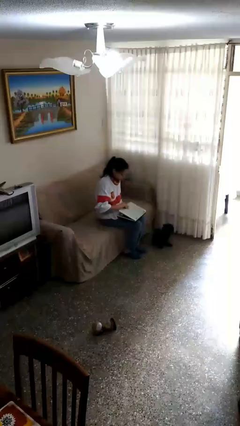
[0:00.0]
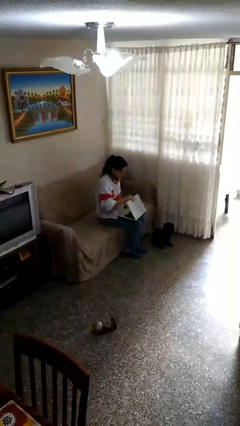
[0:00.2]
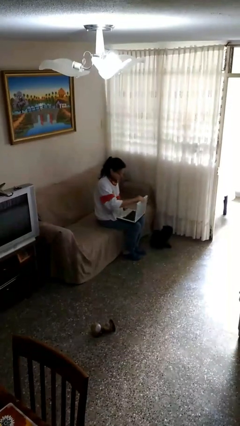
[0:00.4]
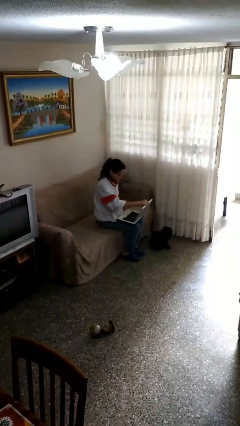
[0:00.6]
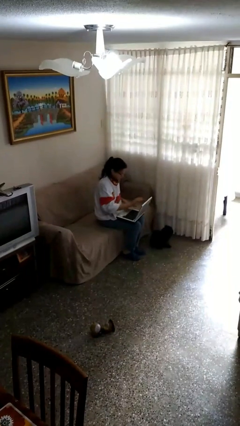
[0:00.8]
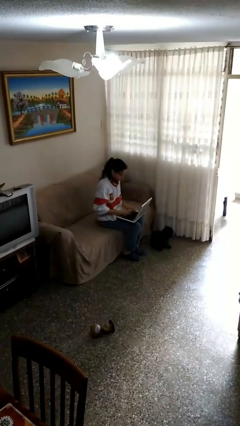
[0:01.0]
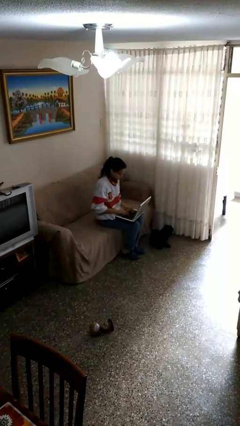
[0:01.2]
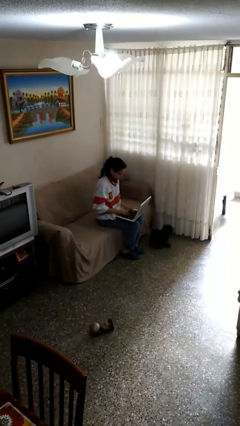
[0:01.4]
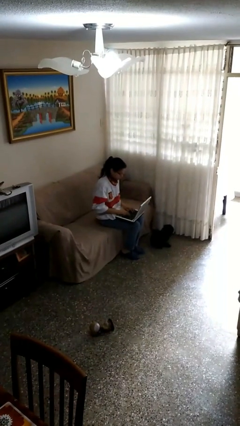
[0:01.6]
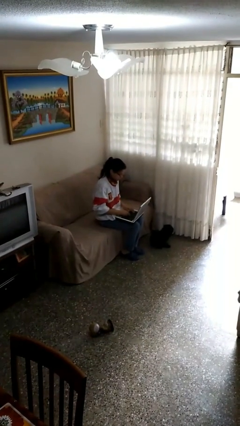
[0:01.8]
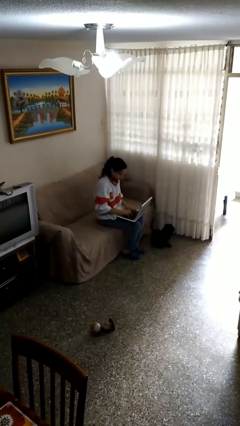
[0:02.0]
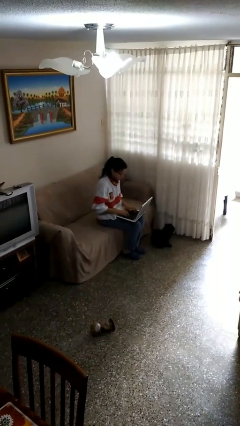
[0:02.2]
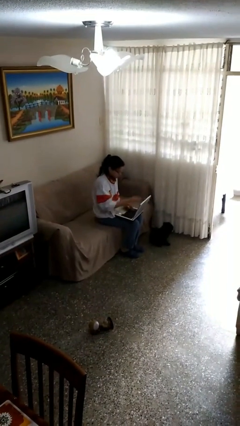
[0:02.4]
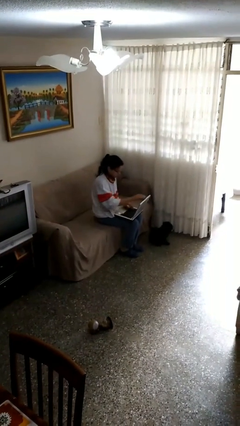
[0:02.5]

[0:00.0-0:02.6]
person interacts with laptop

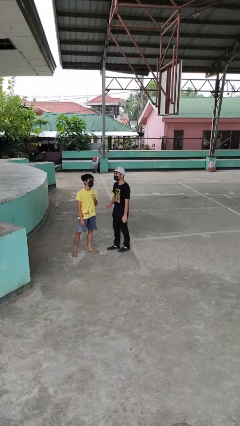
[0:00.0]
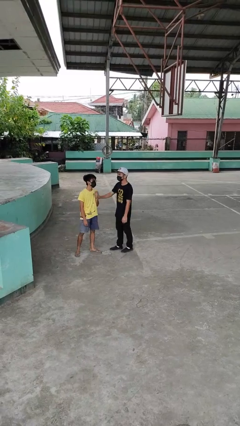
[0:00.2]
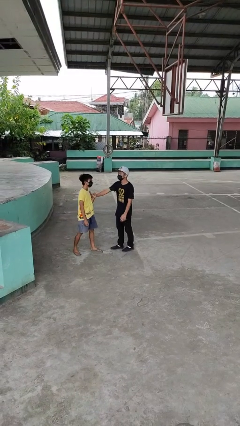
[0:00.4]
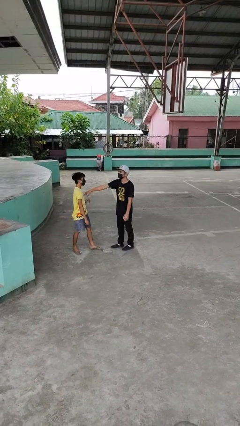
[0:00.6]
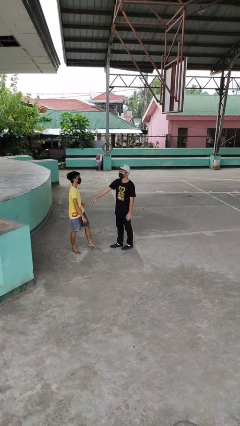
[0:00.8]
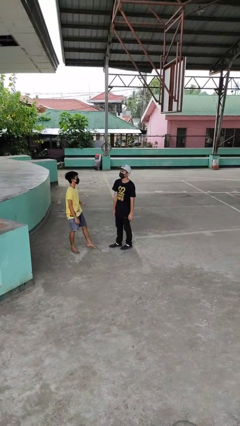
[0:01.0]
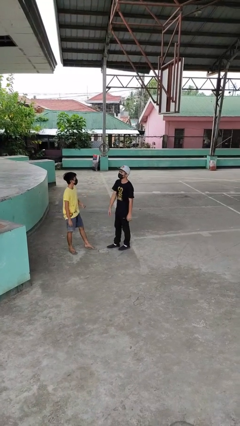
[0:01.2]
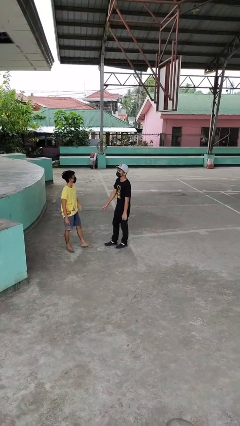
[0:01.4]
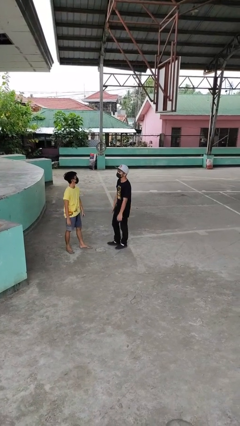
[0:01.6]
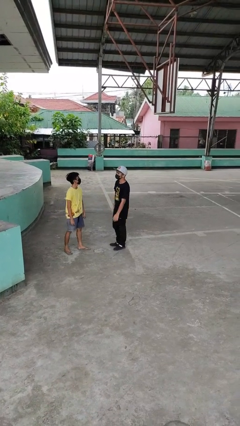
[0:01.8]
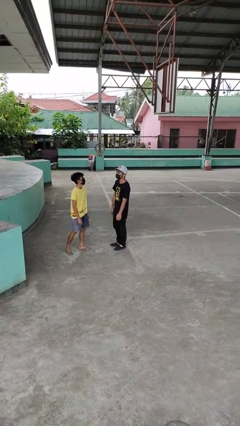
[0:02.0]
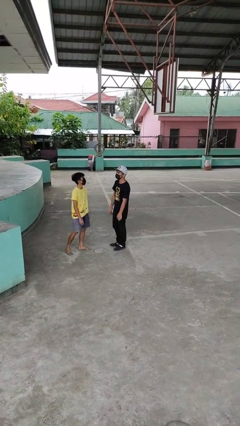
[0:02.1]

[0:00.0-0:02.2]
person shoves person

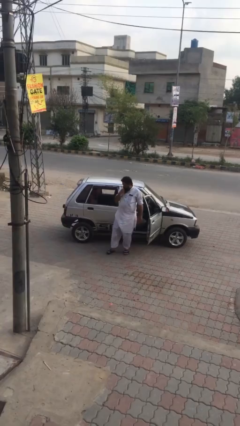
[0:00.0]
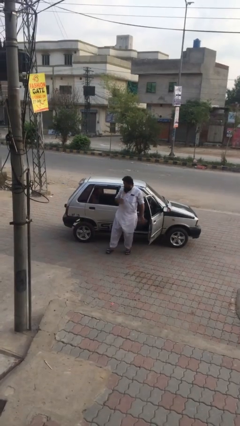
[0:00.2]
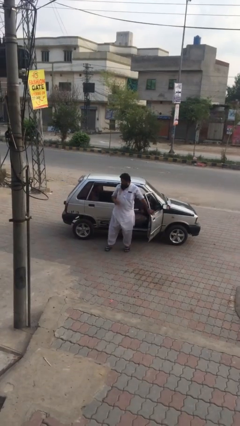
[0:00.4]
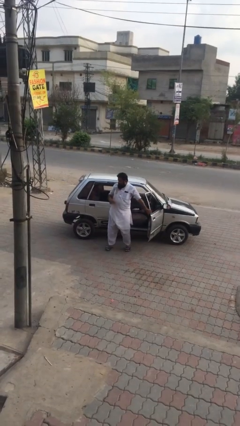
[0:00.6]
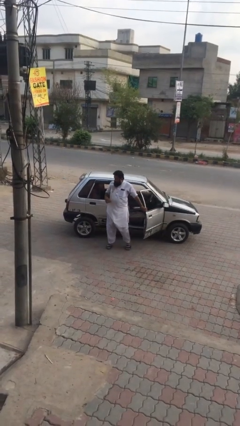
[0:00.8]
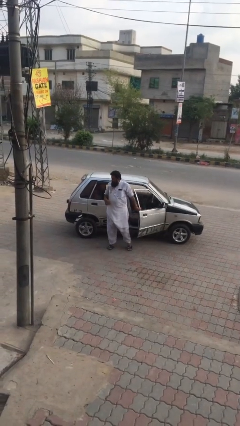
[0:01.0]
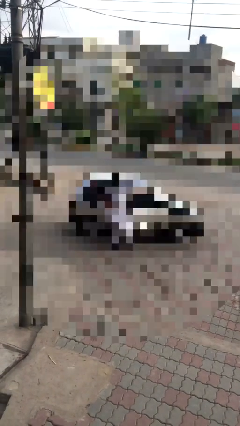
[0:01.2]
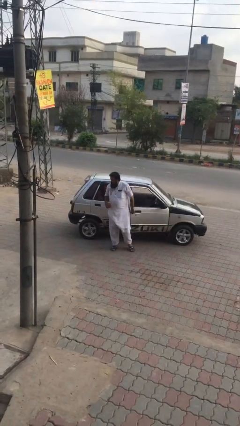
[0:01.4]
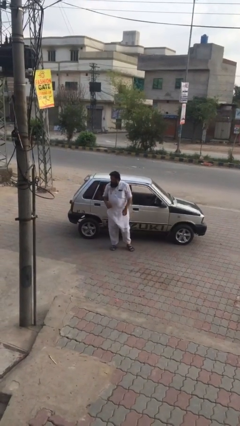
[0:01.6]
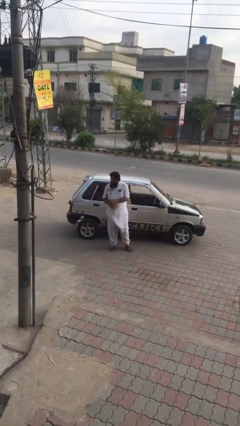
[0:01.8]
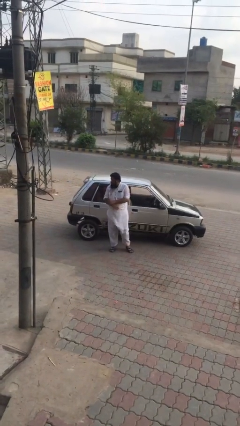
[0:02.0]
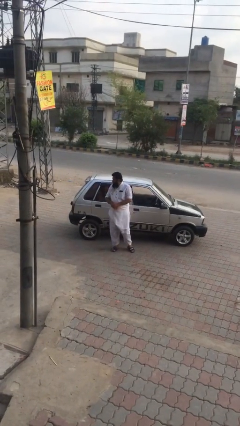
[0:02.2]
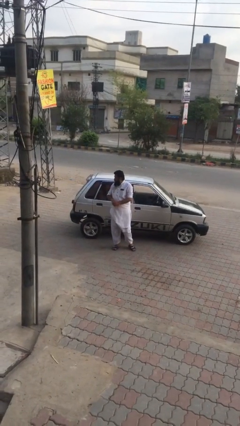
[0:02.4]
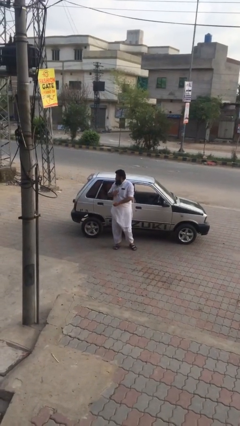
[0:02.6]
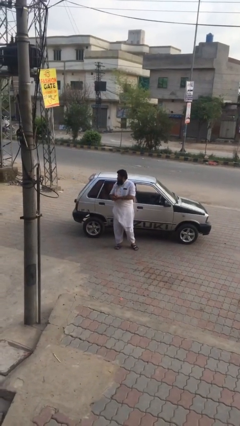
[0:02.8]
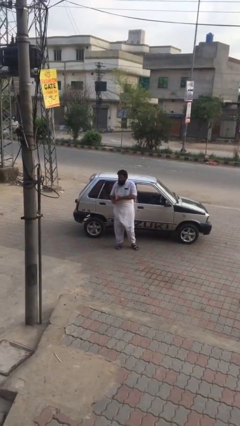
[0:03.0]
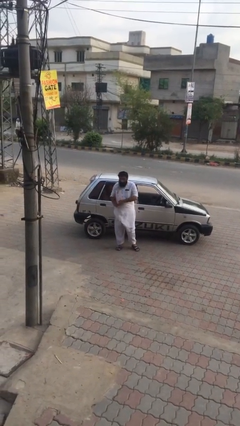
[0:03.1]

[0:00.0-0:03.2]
person closes car door

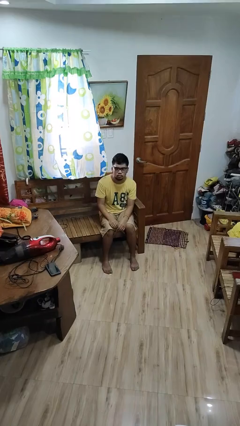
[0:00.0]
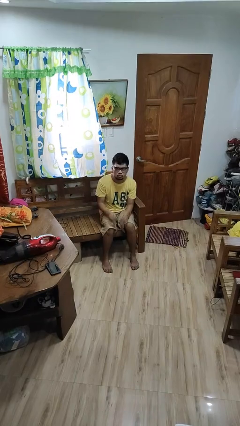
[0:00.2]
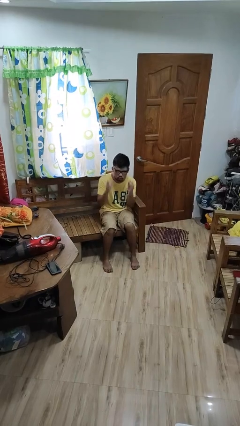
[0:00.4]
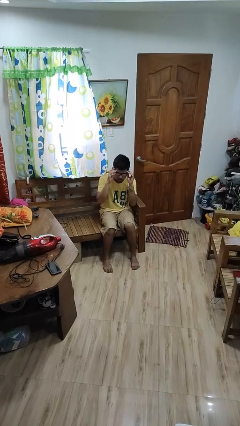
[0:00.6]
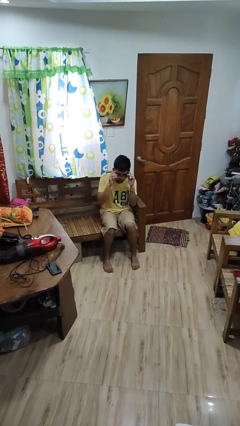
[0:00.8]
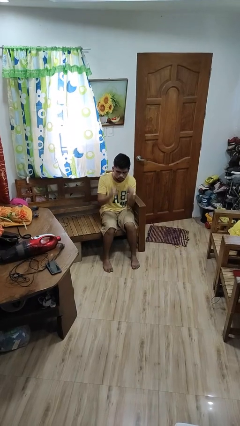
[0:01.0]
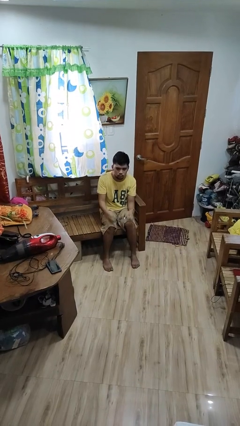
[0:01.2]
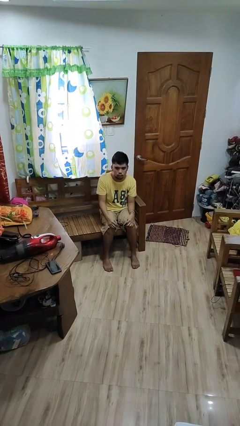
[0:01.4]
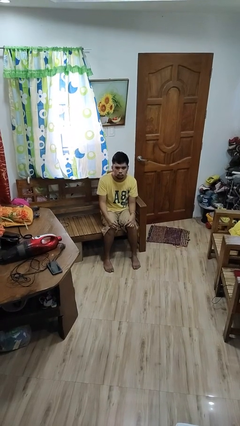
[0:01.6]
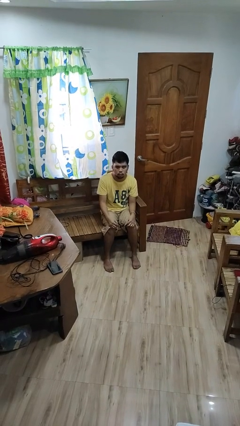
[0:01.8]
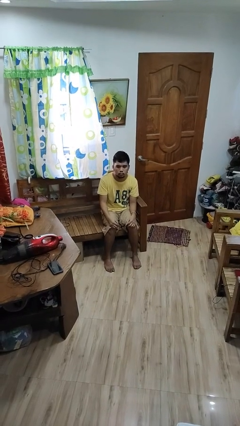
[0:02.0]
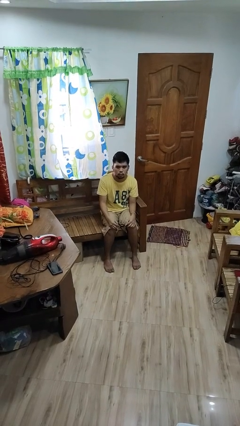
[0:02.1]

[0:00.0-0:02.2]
person takes off glasses

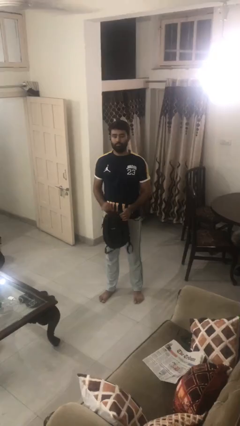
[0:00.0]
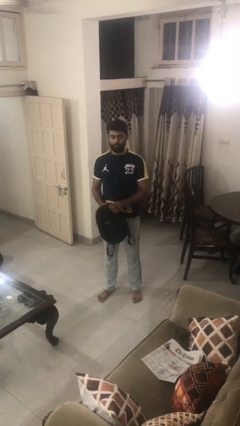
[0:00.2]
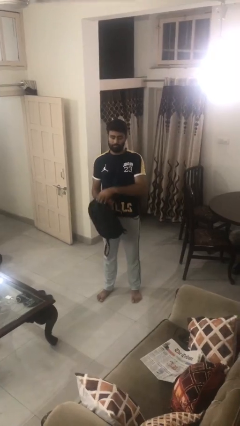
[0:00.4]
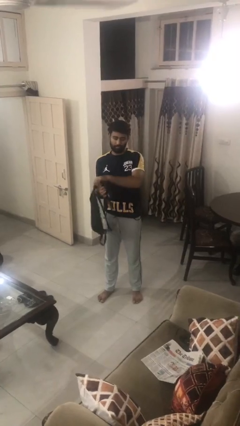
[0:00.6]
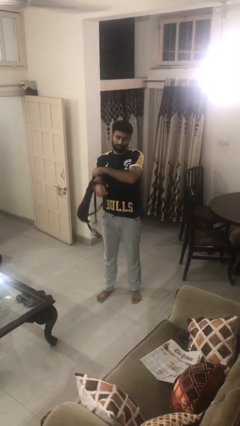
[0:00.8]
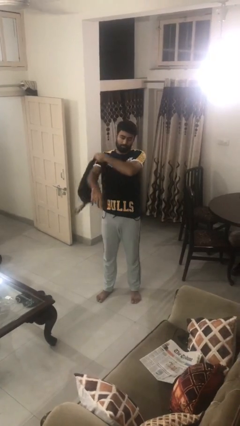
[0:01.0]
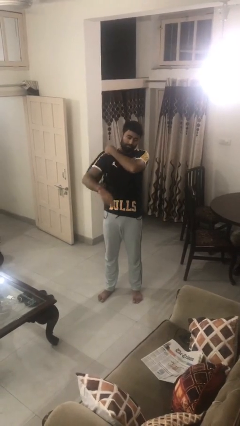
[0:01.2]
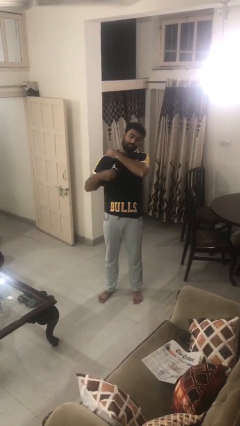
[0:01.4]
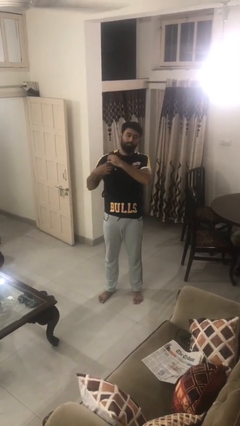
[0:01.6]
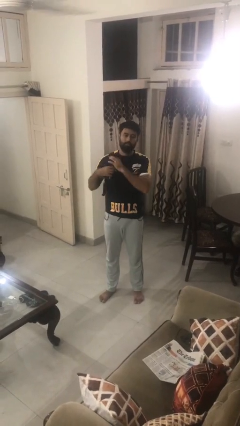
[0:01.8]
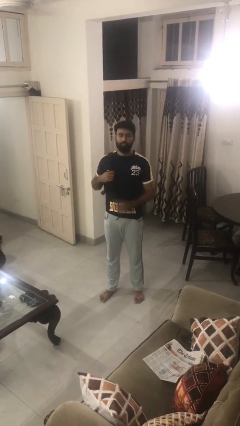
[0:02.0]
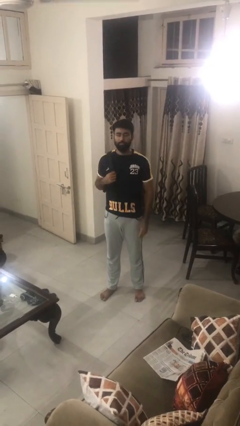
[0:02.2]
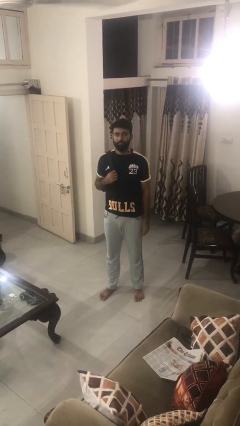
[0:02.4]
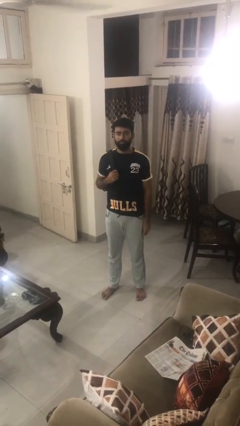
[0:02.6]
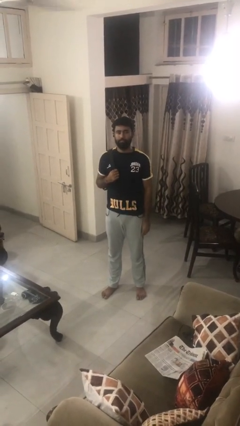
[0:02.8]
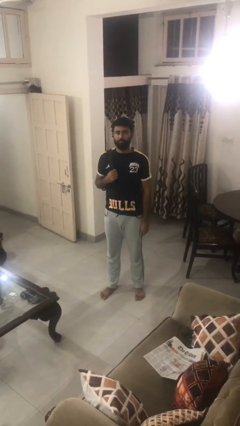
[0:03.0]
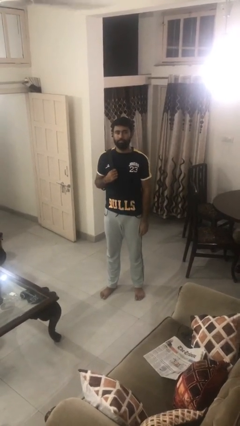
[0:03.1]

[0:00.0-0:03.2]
person puts on backpack

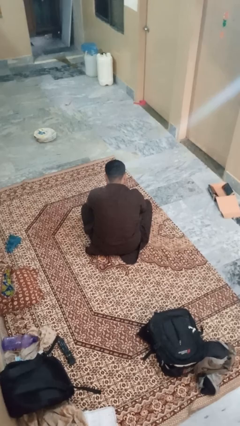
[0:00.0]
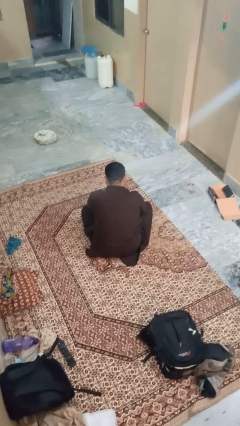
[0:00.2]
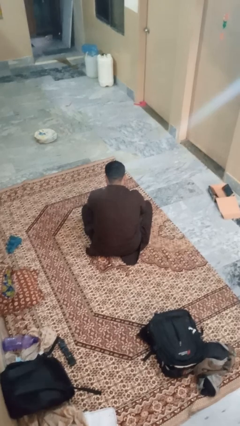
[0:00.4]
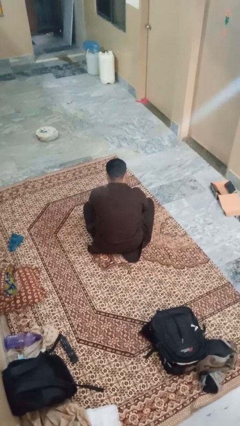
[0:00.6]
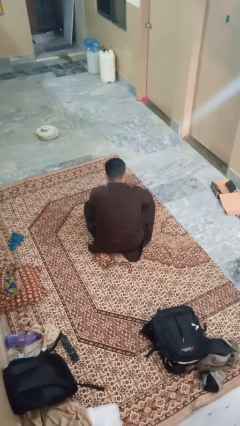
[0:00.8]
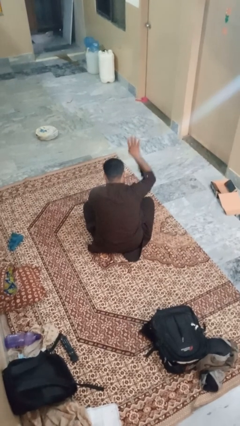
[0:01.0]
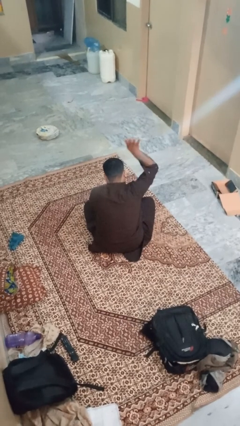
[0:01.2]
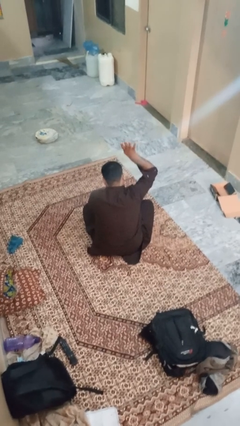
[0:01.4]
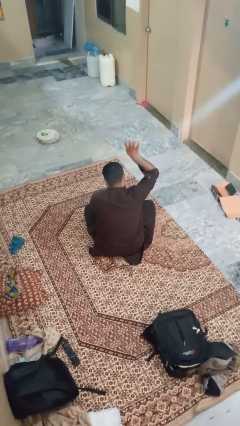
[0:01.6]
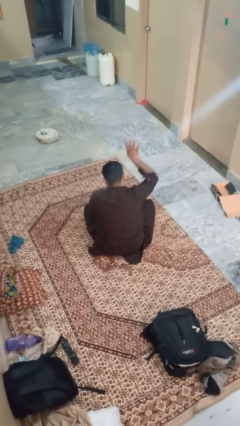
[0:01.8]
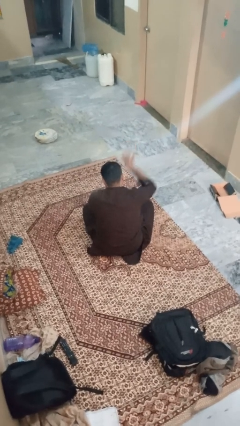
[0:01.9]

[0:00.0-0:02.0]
person gestures number four

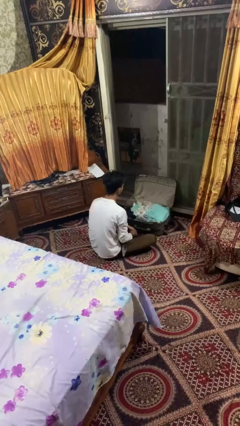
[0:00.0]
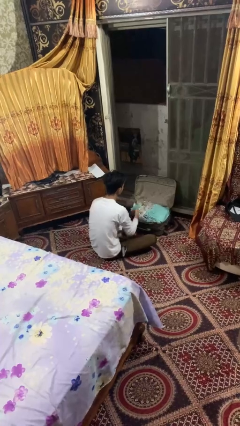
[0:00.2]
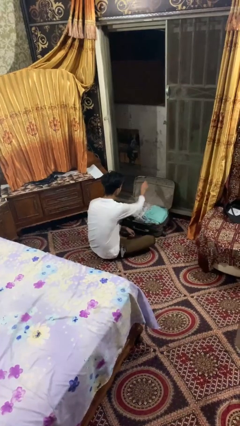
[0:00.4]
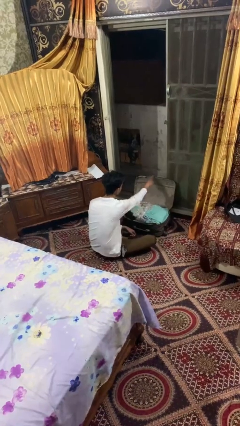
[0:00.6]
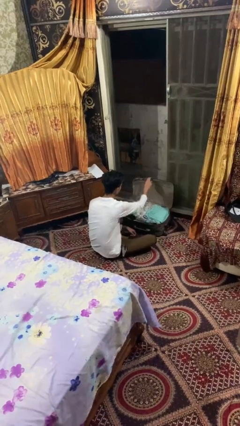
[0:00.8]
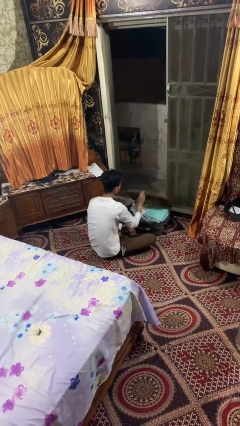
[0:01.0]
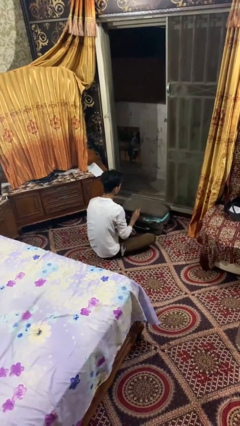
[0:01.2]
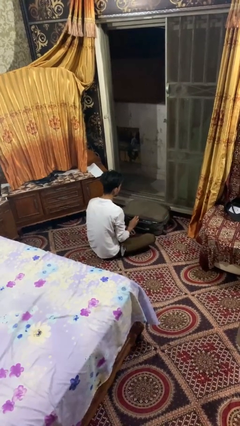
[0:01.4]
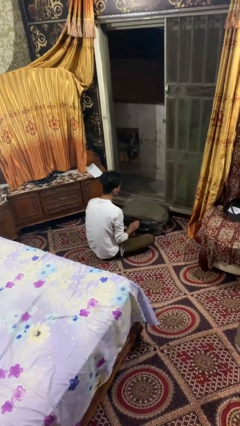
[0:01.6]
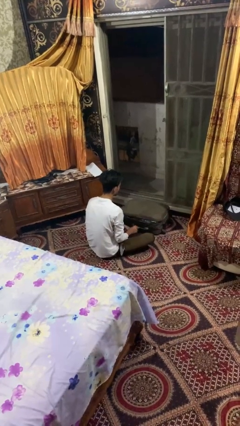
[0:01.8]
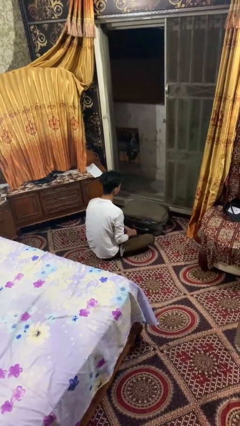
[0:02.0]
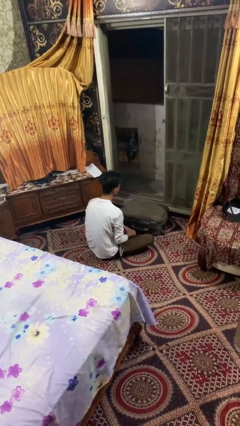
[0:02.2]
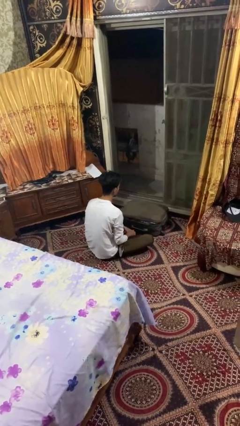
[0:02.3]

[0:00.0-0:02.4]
person closes suitcase
